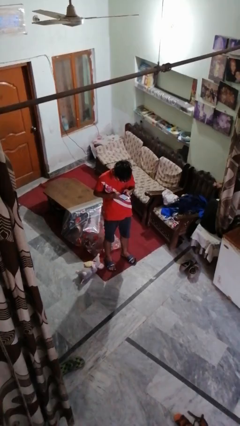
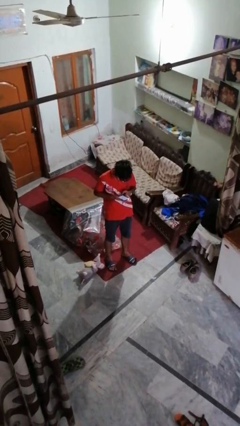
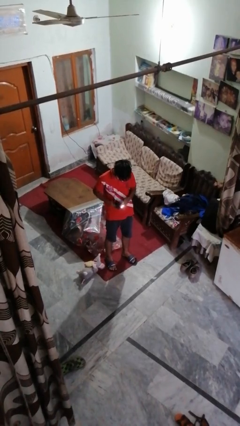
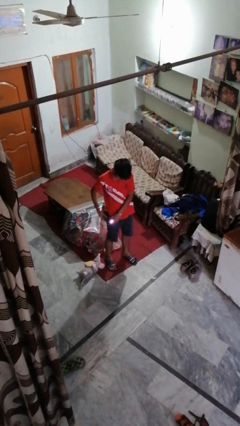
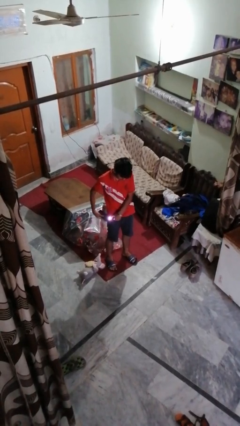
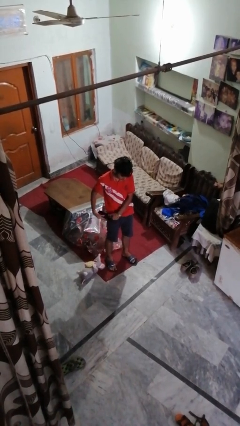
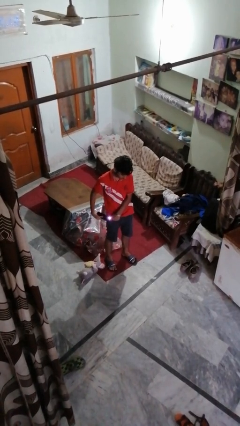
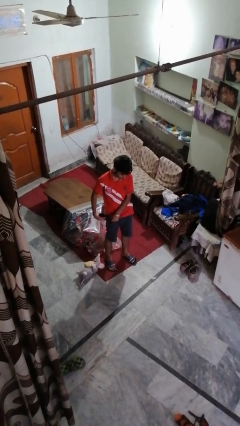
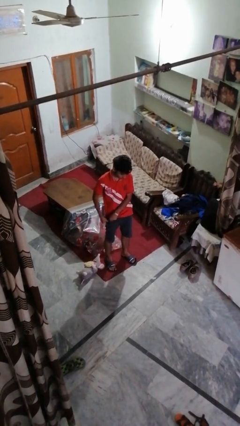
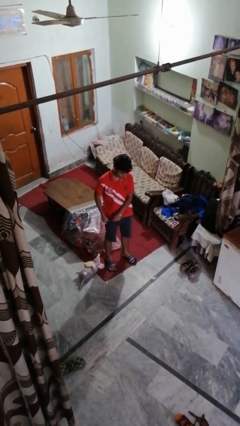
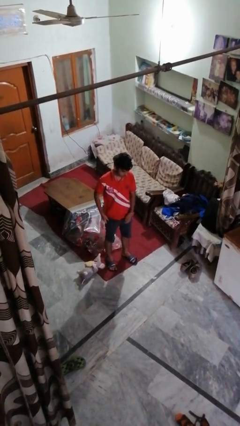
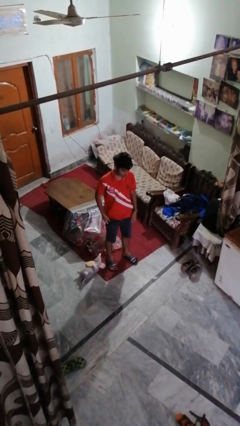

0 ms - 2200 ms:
person puts phone into pocket

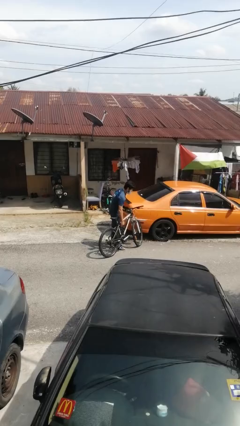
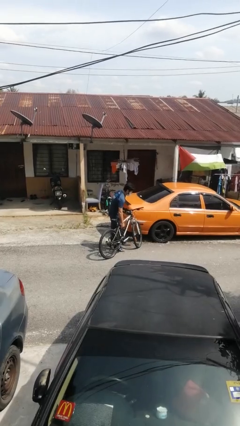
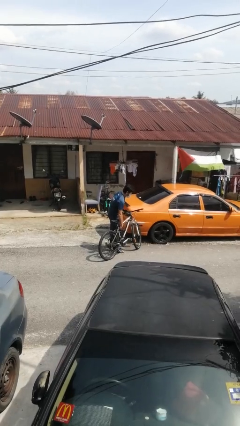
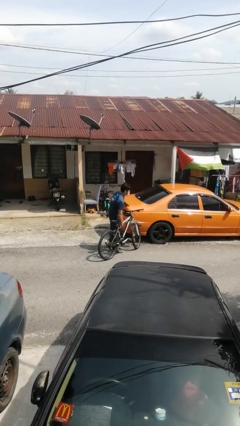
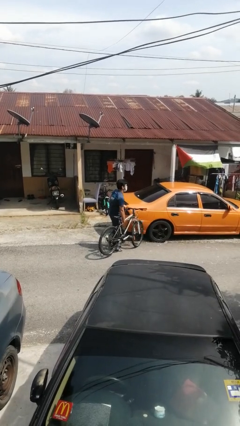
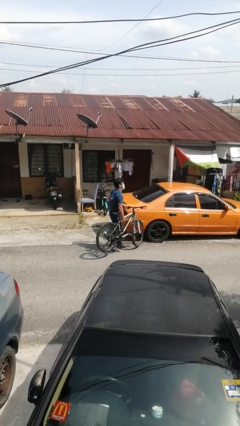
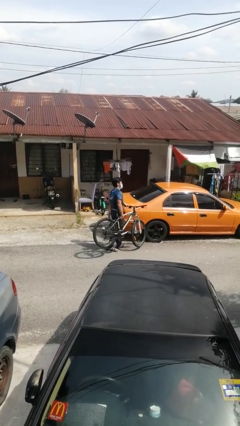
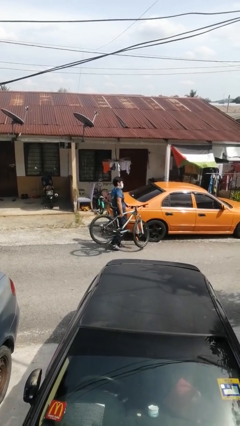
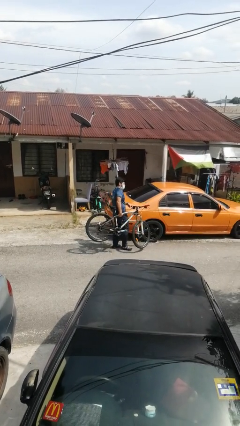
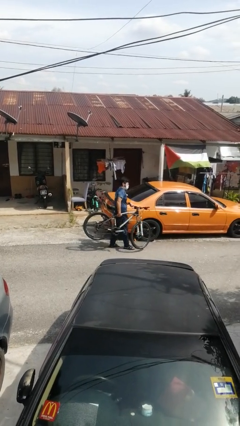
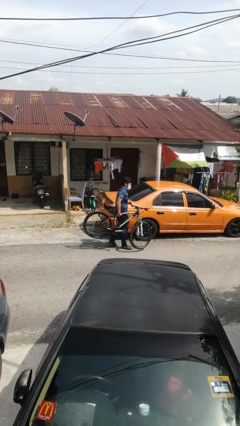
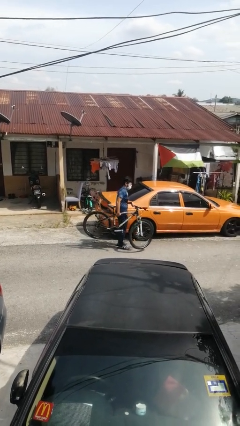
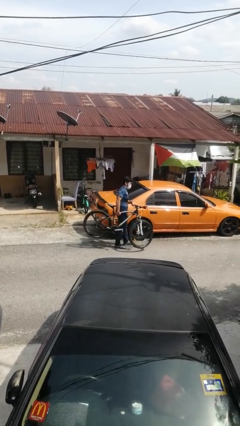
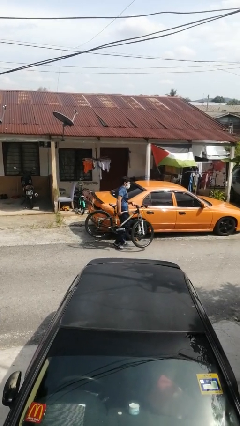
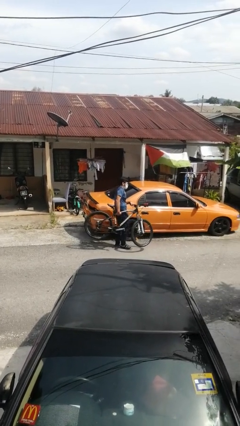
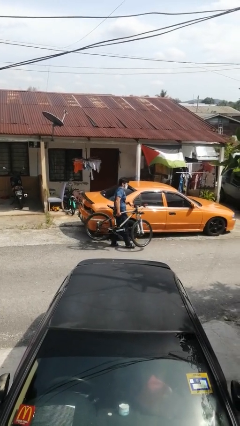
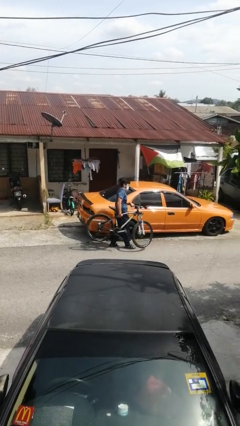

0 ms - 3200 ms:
person carries bicycle

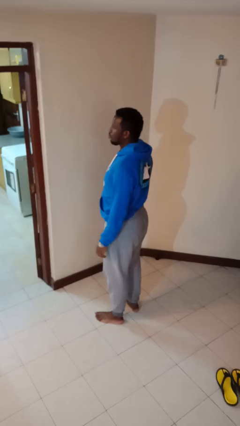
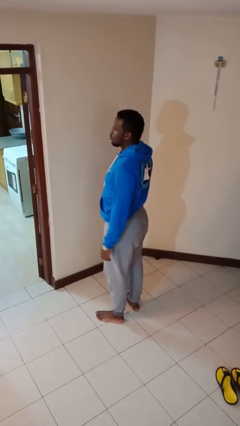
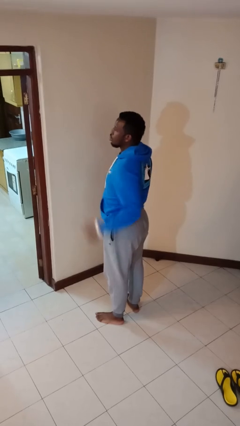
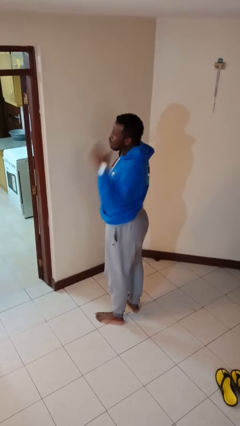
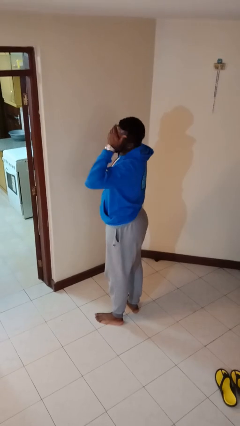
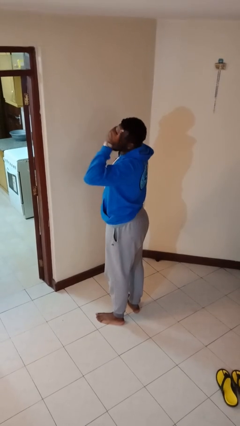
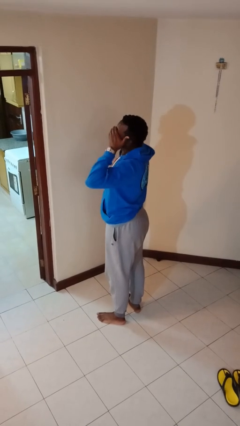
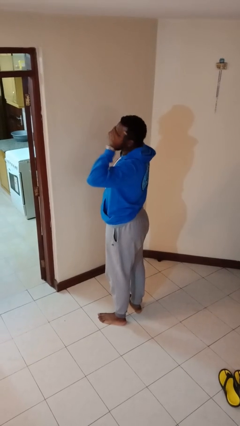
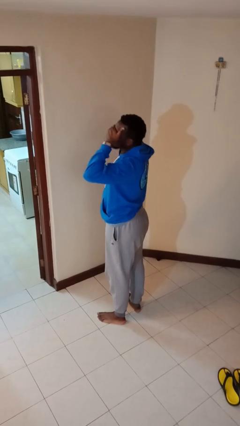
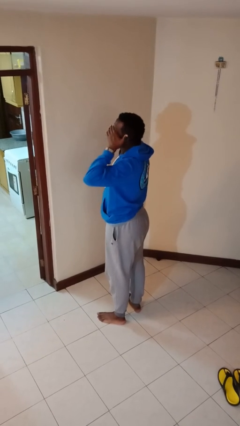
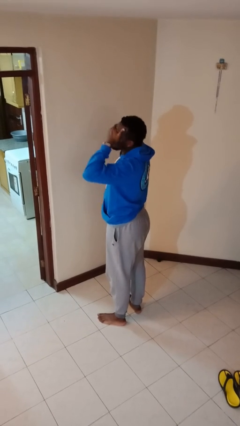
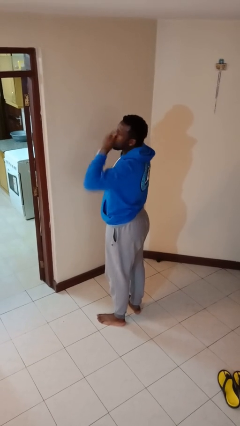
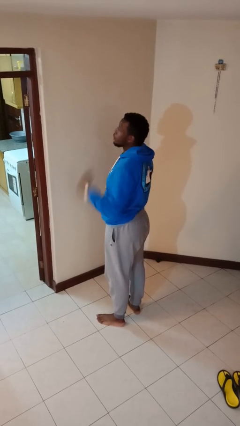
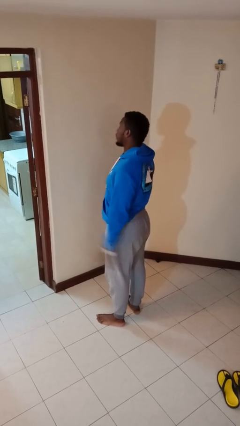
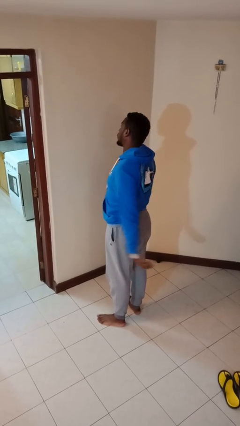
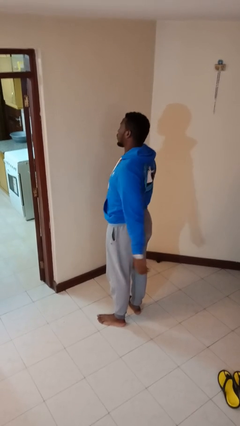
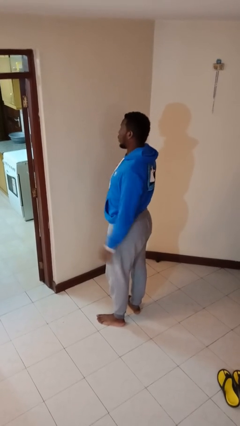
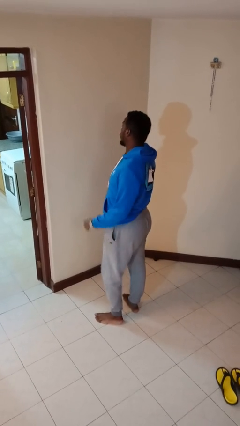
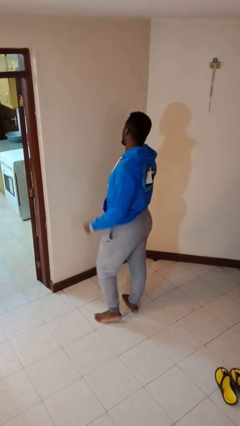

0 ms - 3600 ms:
person rubs eyes

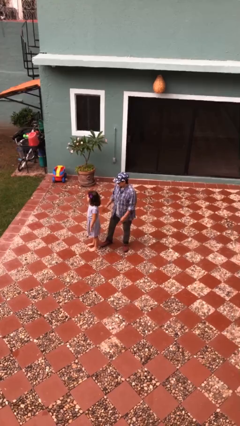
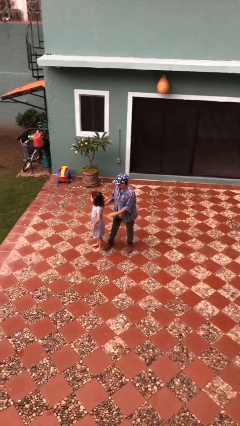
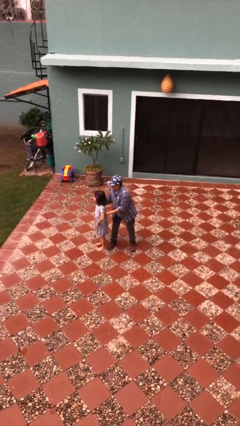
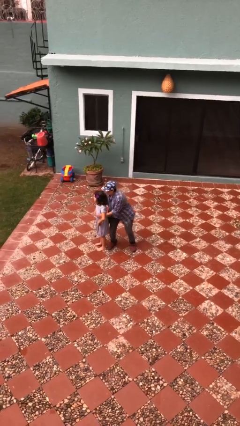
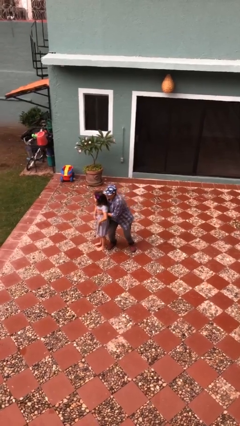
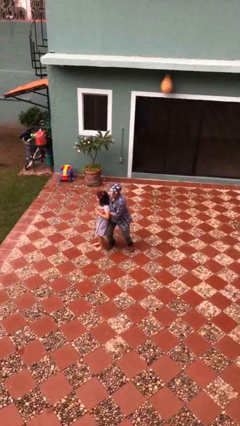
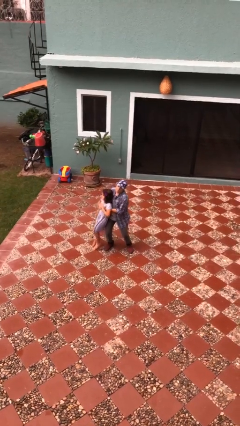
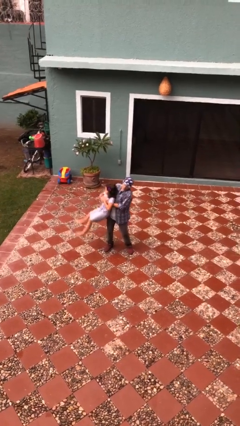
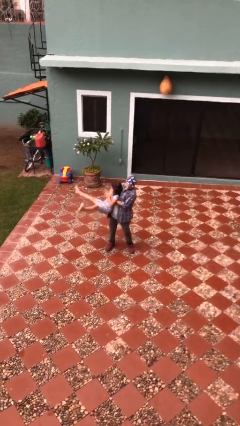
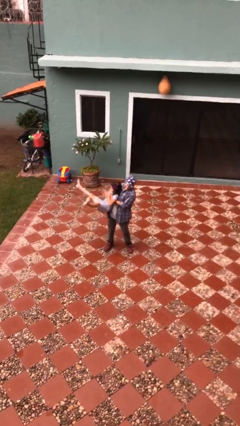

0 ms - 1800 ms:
person picks up person

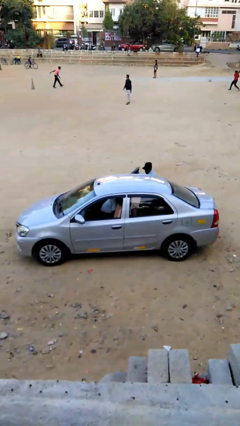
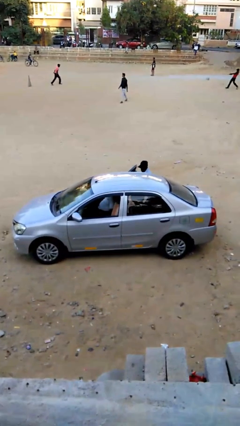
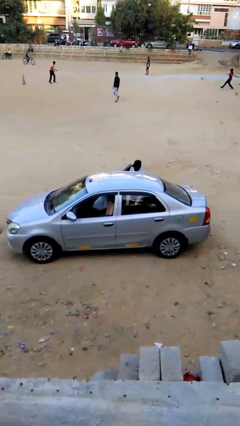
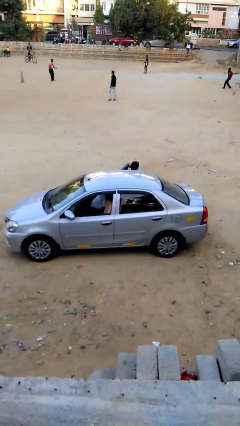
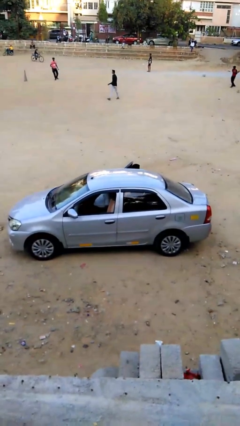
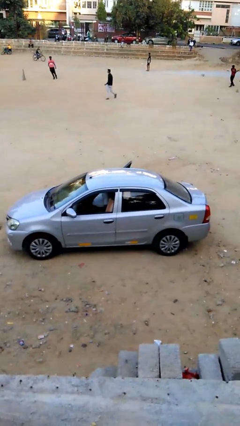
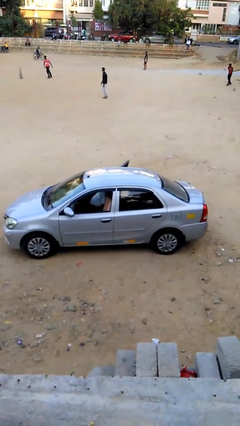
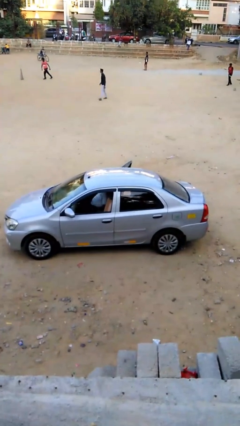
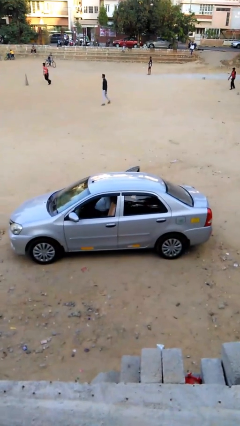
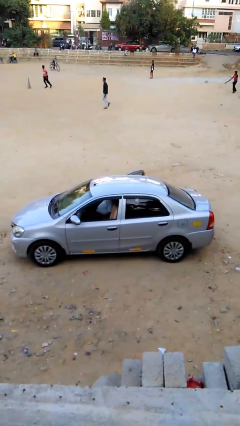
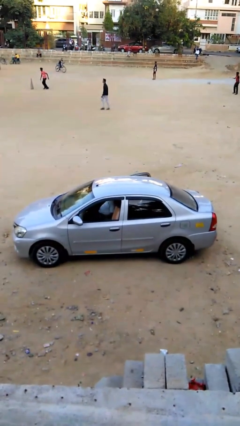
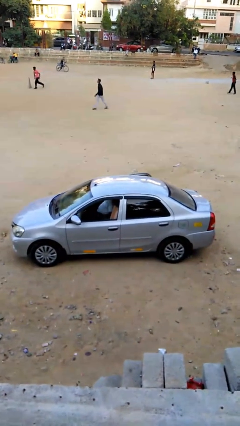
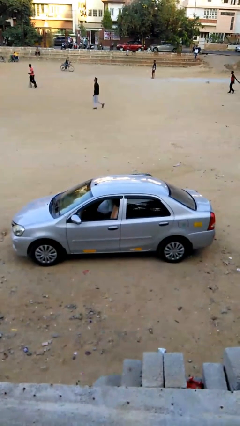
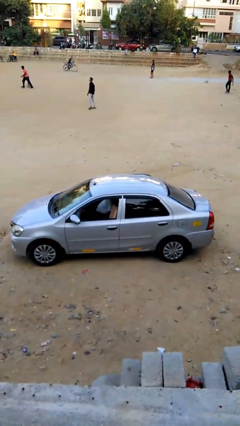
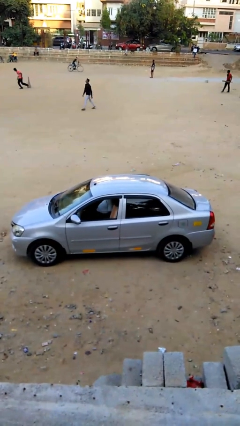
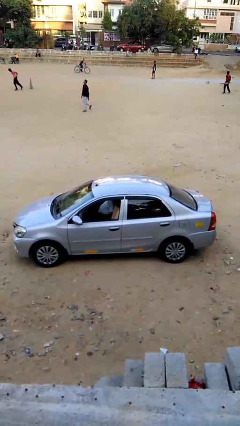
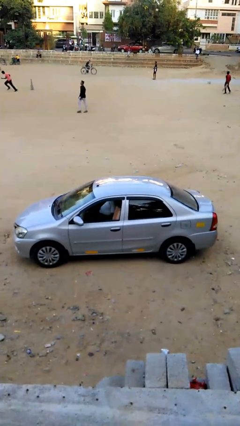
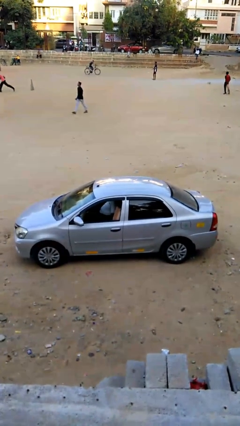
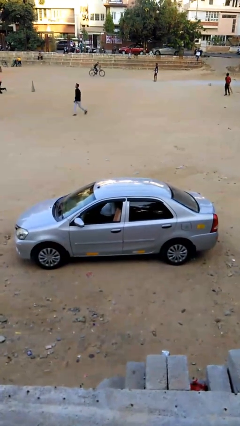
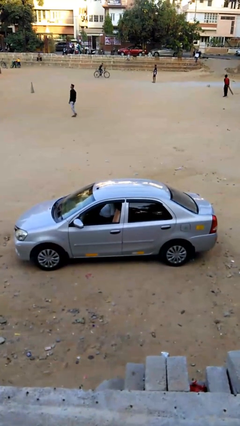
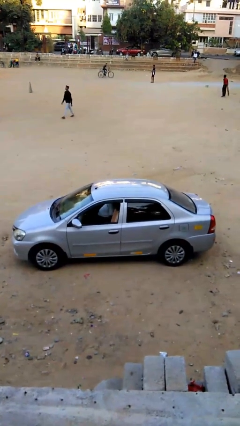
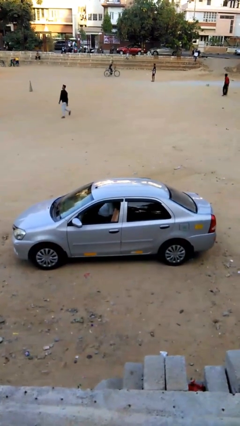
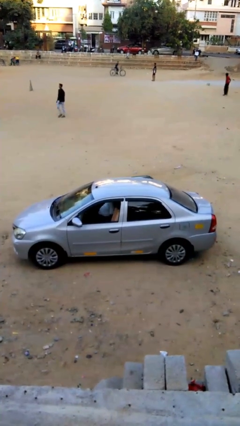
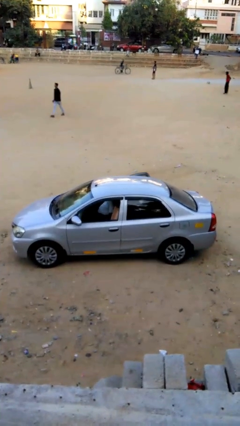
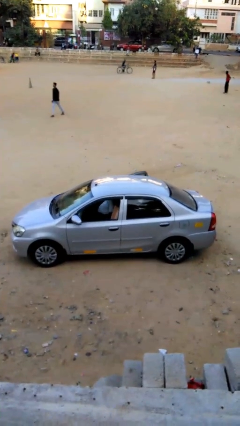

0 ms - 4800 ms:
car picks up person

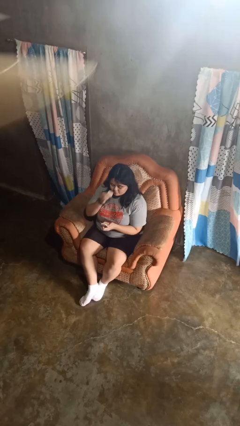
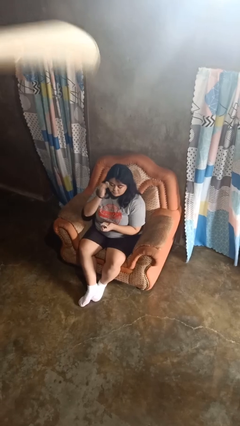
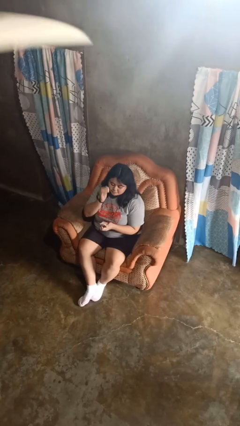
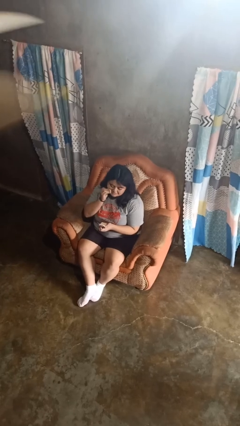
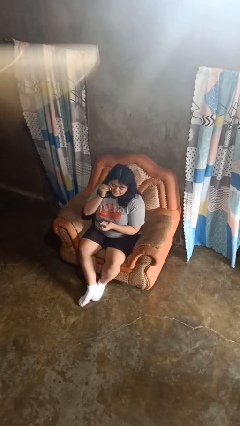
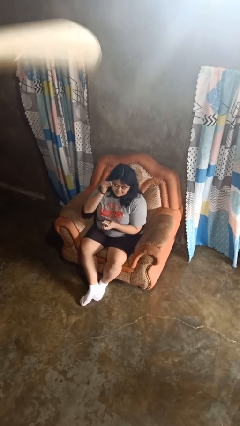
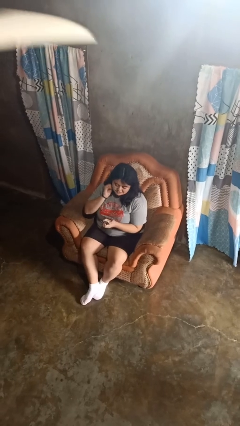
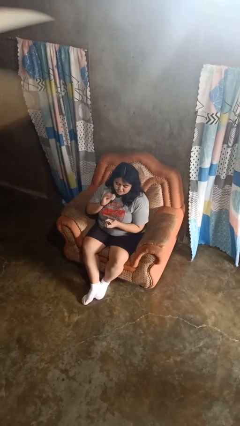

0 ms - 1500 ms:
person applies foundation makeup

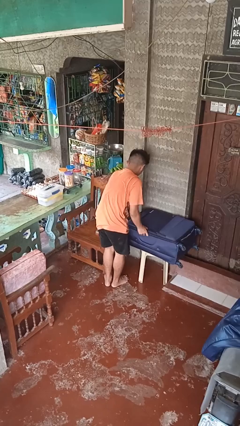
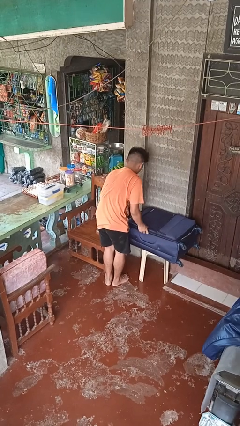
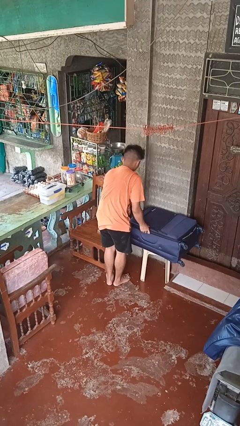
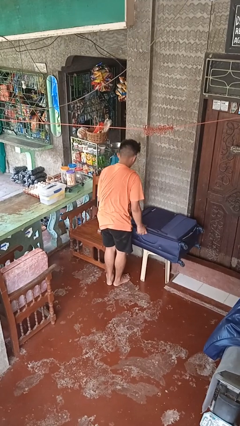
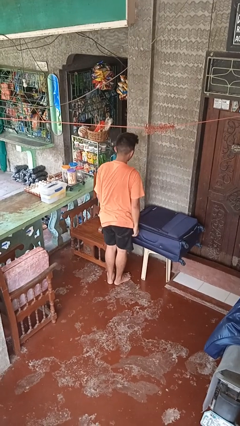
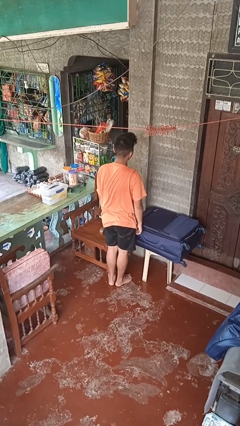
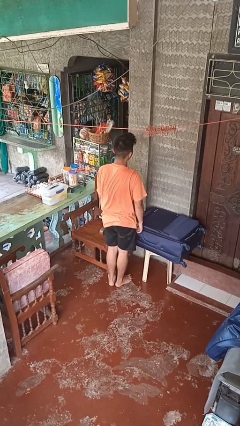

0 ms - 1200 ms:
person closes suitcase
